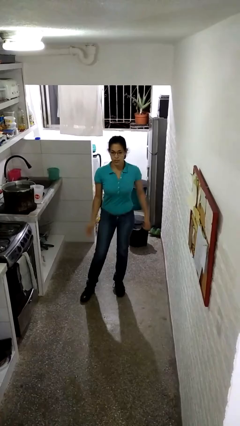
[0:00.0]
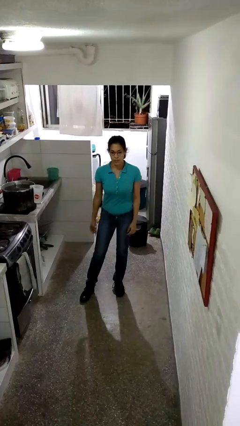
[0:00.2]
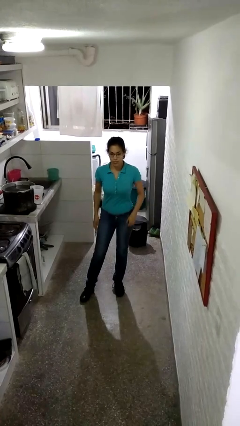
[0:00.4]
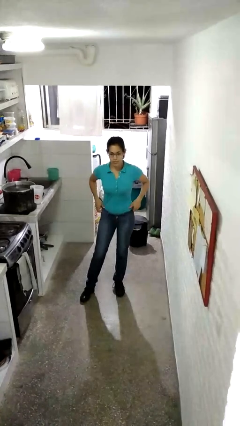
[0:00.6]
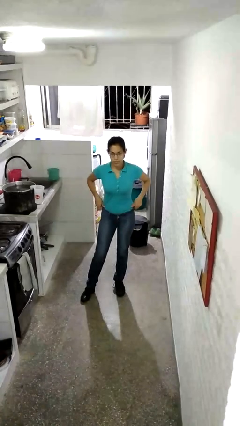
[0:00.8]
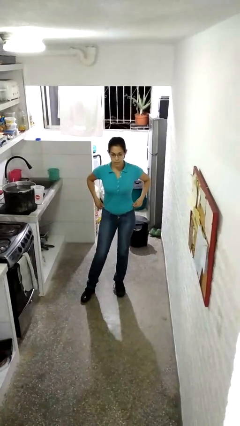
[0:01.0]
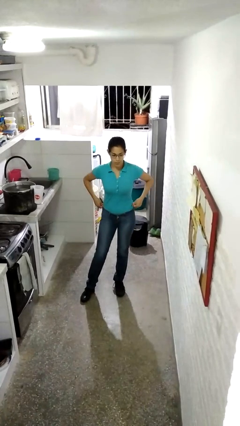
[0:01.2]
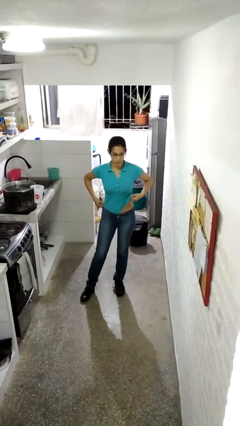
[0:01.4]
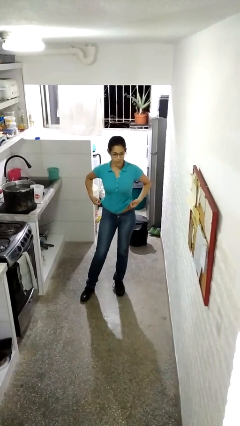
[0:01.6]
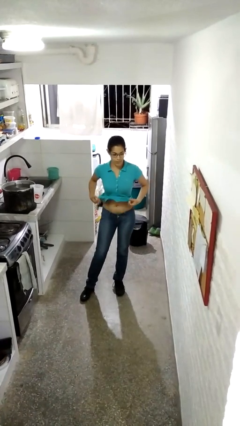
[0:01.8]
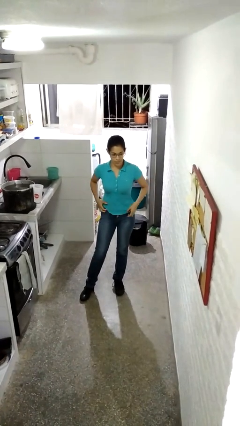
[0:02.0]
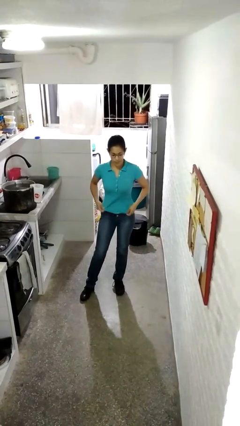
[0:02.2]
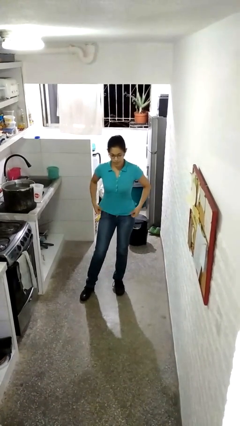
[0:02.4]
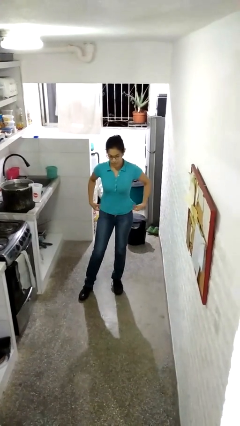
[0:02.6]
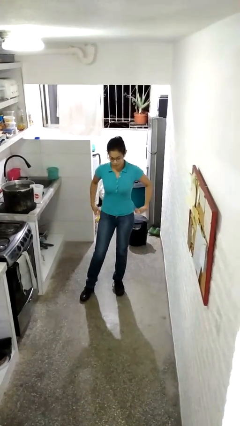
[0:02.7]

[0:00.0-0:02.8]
person untucks shirt

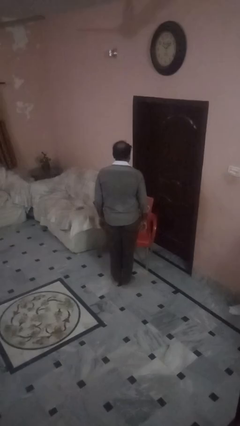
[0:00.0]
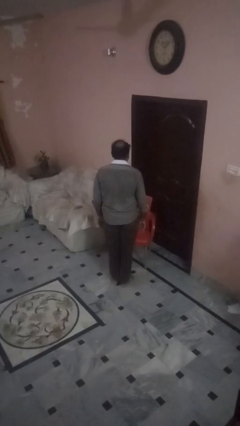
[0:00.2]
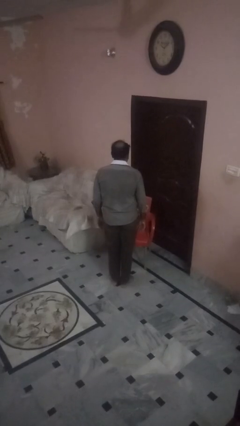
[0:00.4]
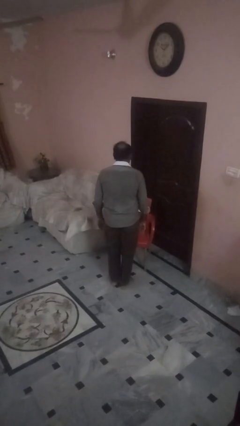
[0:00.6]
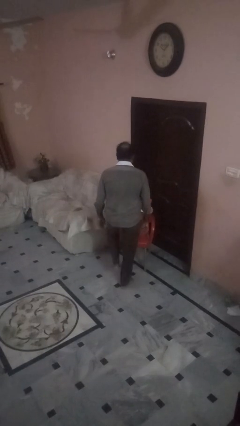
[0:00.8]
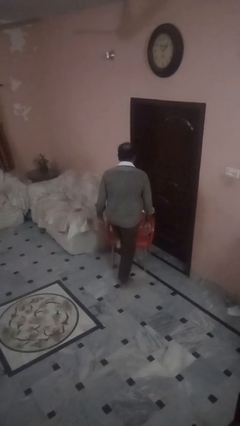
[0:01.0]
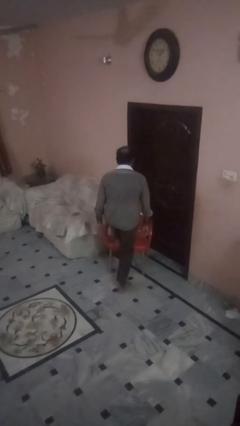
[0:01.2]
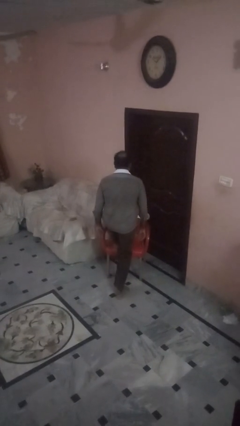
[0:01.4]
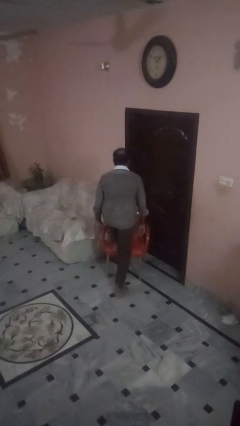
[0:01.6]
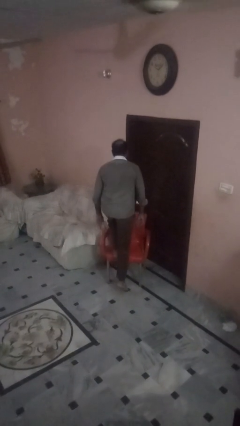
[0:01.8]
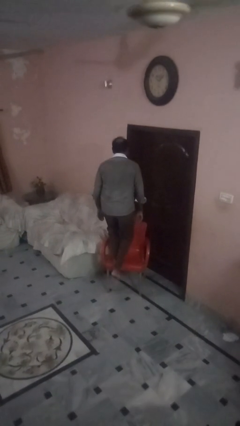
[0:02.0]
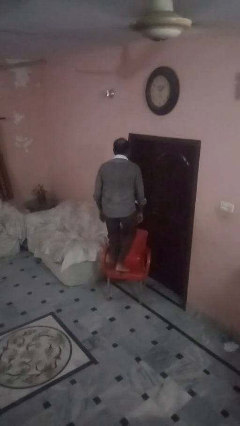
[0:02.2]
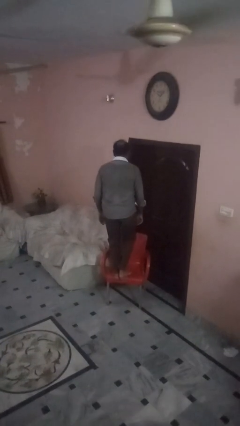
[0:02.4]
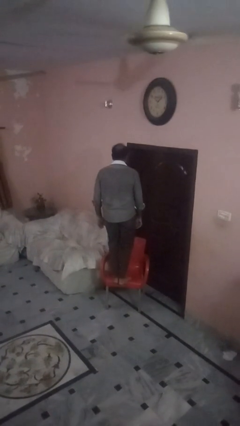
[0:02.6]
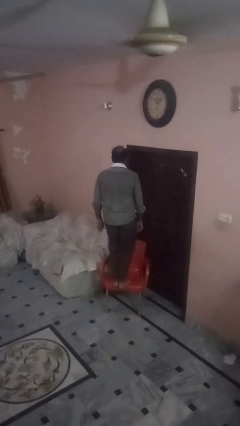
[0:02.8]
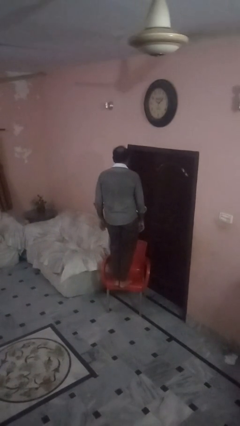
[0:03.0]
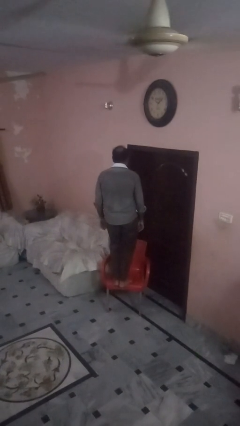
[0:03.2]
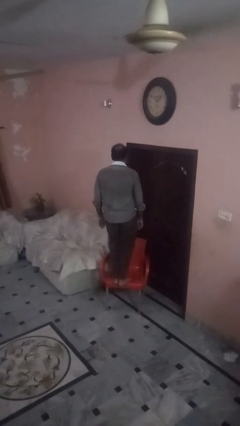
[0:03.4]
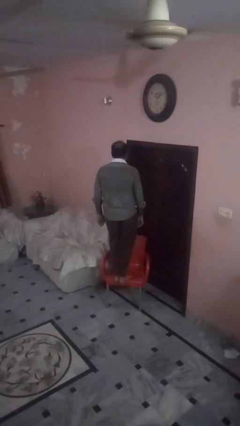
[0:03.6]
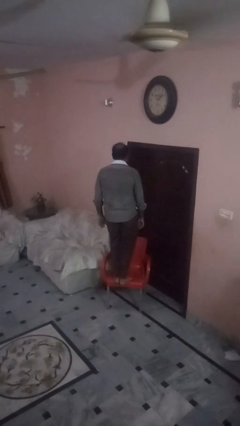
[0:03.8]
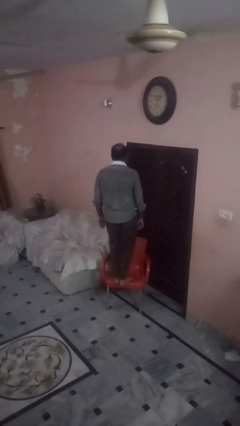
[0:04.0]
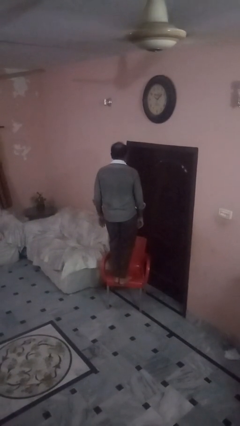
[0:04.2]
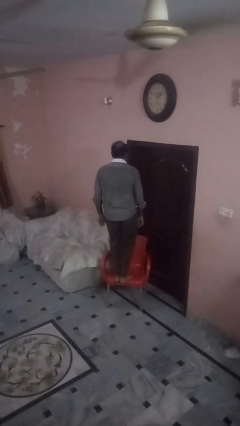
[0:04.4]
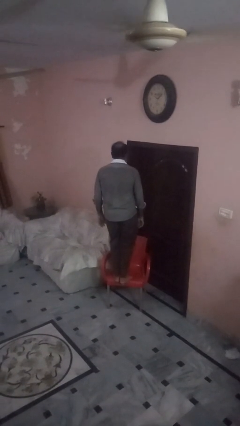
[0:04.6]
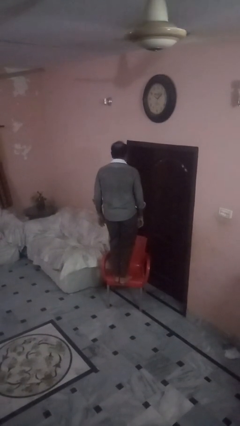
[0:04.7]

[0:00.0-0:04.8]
person climbs on chair

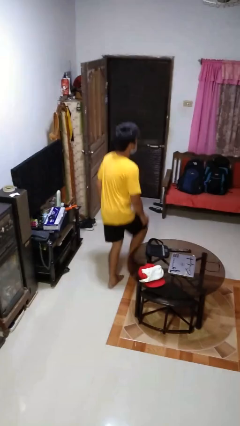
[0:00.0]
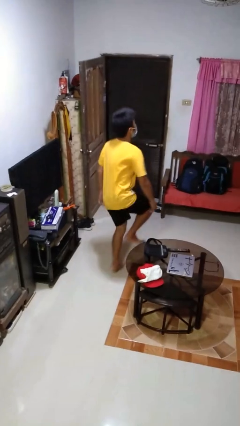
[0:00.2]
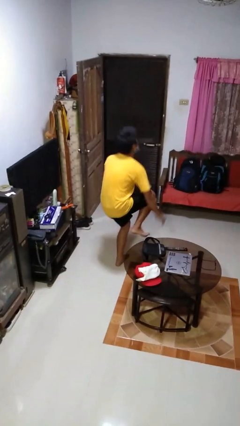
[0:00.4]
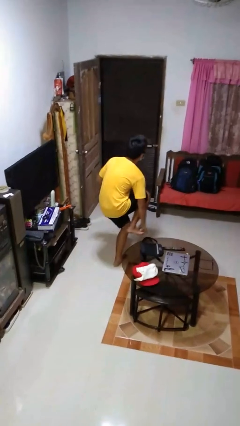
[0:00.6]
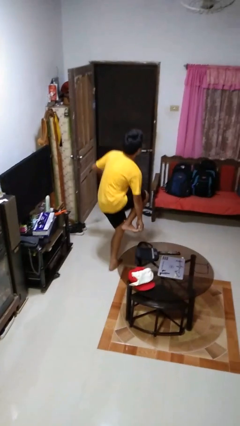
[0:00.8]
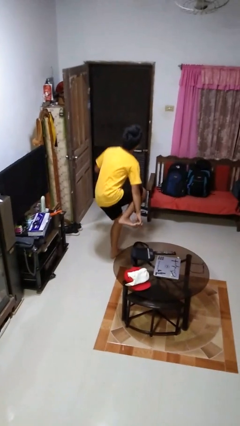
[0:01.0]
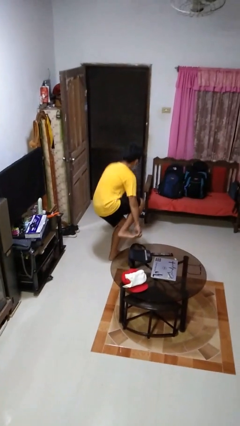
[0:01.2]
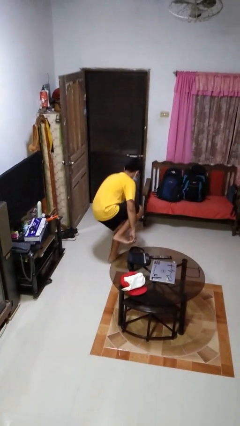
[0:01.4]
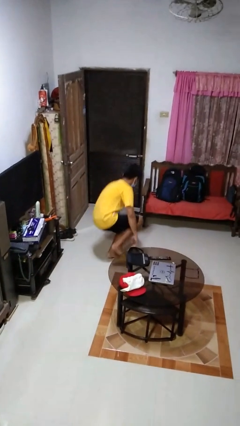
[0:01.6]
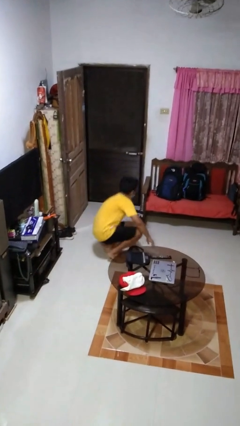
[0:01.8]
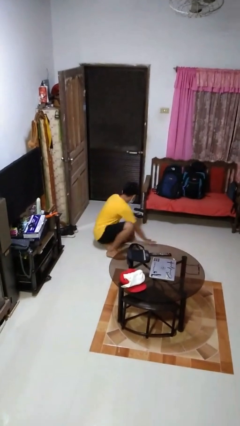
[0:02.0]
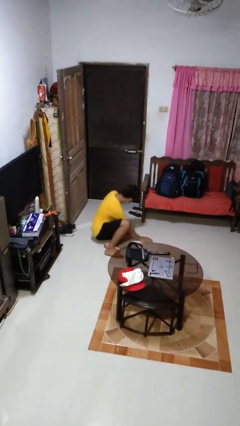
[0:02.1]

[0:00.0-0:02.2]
person trips on object on floor

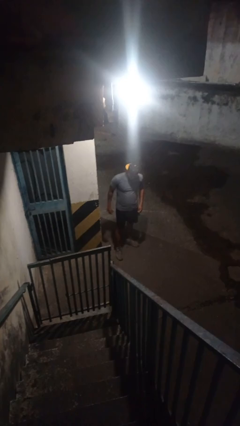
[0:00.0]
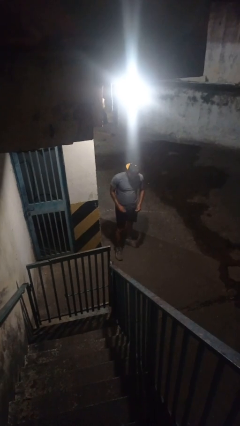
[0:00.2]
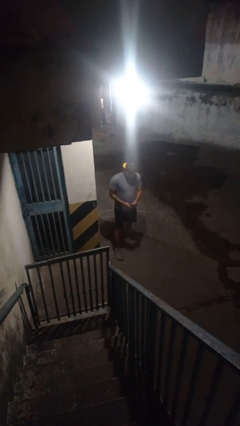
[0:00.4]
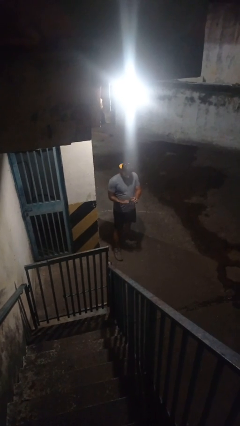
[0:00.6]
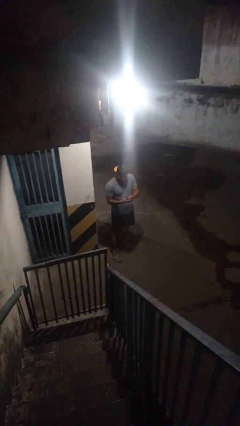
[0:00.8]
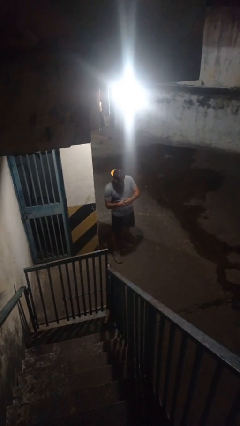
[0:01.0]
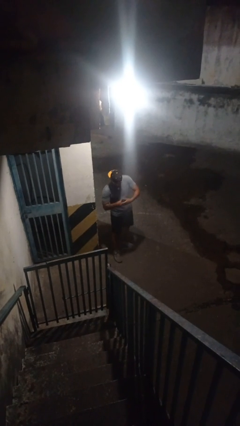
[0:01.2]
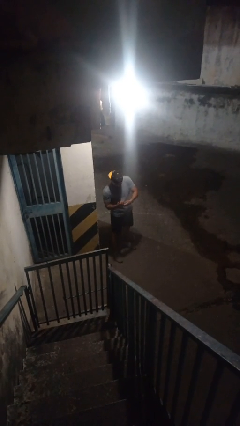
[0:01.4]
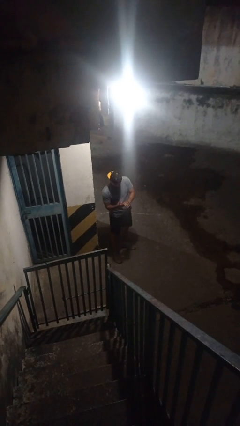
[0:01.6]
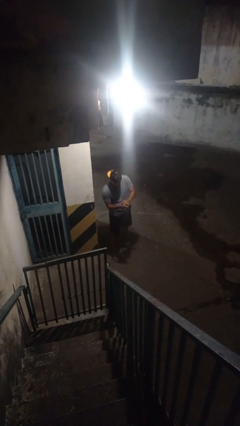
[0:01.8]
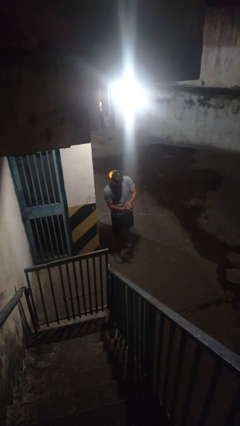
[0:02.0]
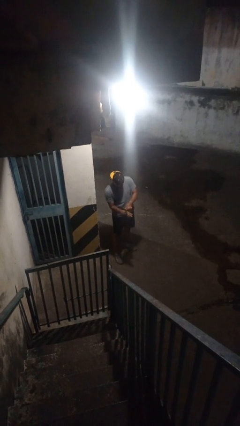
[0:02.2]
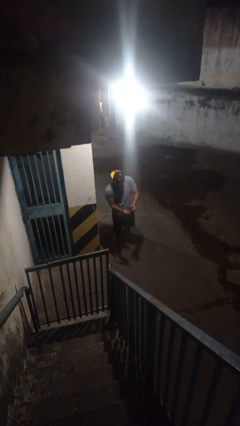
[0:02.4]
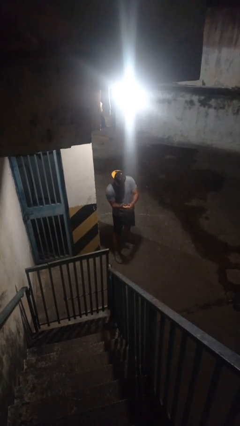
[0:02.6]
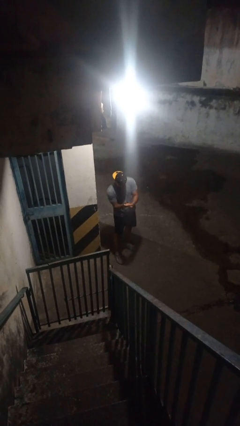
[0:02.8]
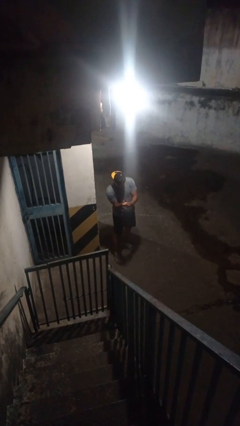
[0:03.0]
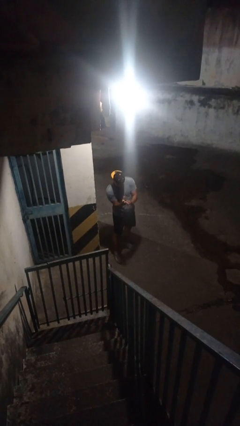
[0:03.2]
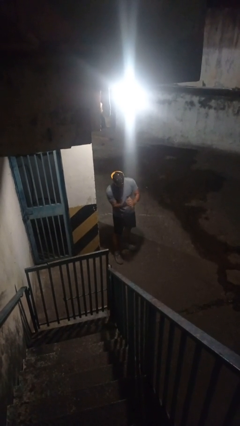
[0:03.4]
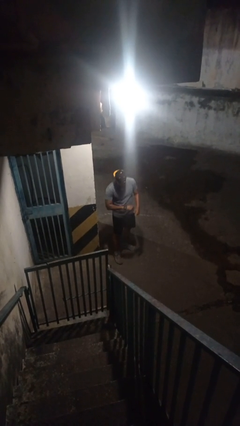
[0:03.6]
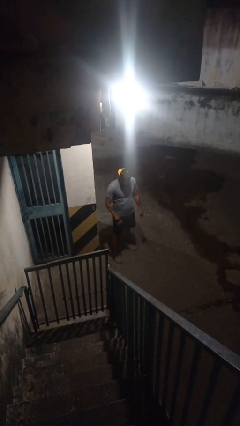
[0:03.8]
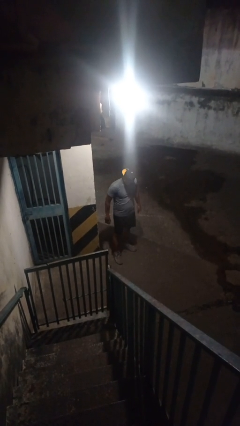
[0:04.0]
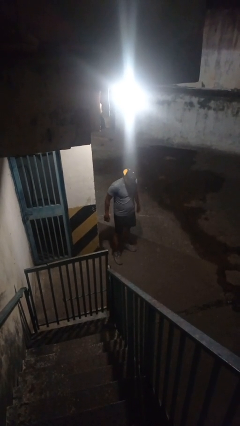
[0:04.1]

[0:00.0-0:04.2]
person puts on wristwatch

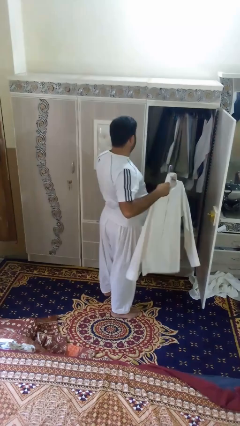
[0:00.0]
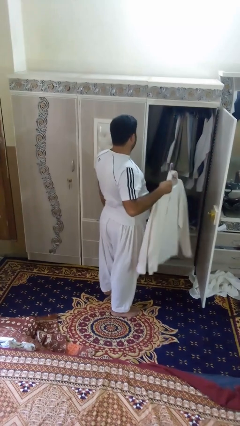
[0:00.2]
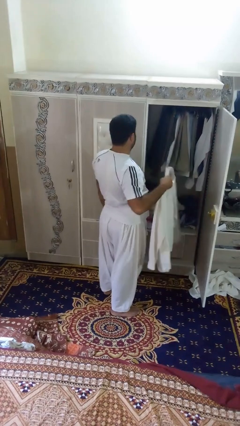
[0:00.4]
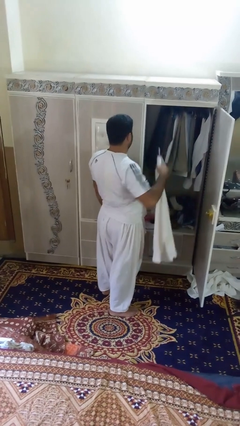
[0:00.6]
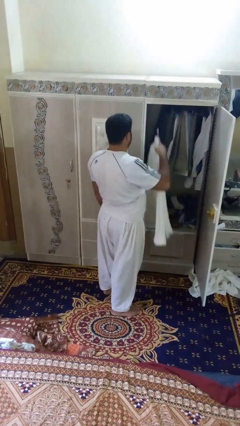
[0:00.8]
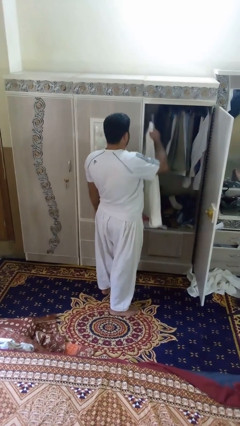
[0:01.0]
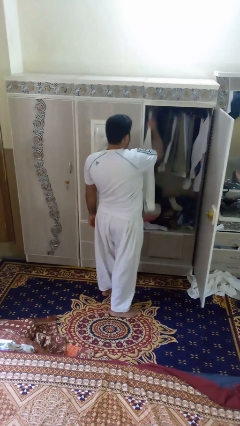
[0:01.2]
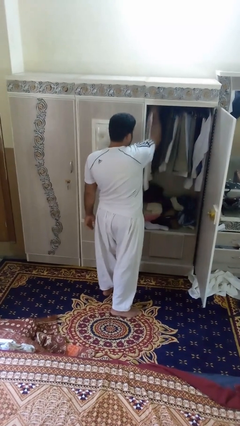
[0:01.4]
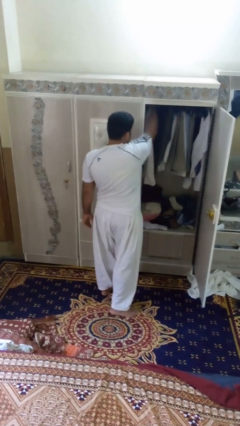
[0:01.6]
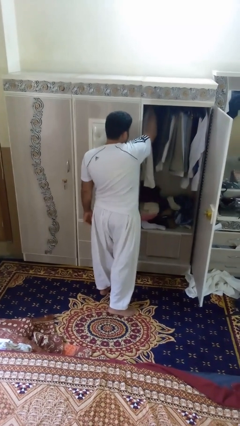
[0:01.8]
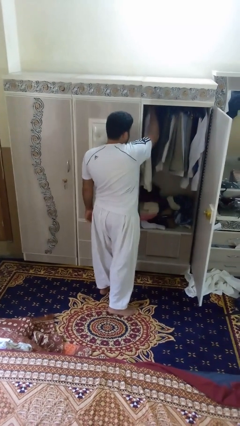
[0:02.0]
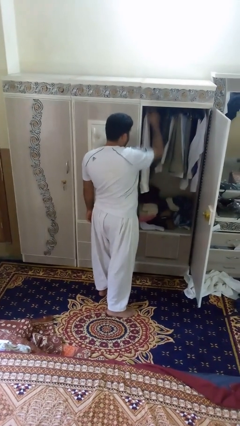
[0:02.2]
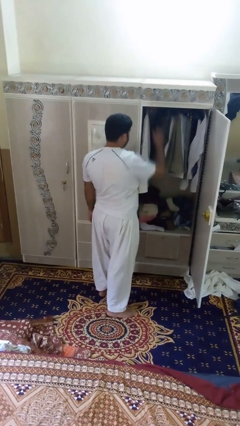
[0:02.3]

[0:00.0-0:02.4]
person puts clothes into closet

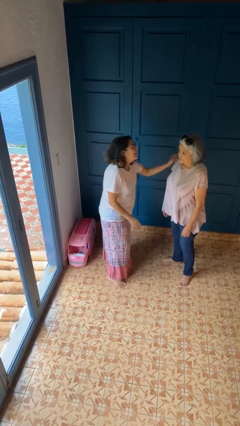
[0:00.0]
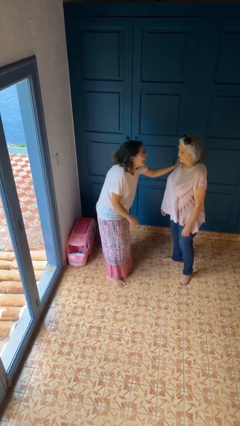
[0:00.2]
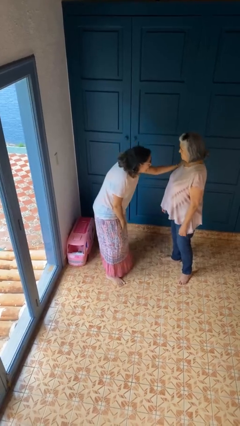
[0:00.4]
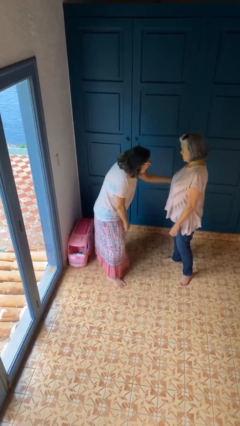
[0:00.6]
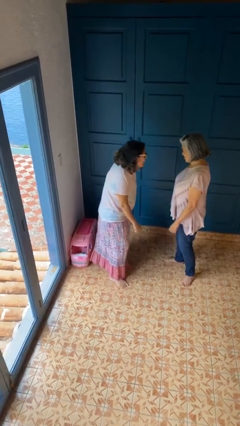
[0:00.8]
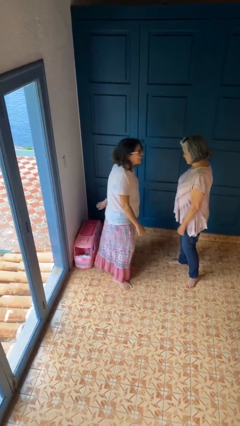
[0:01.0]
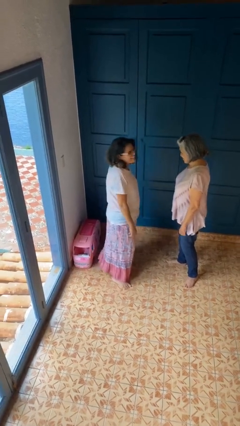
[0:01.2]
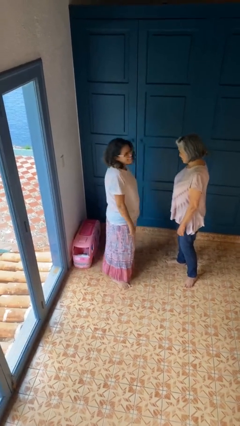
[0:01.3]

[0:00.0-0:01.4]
person shoves person
